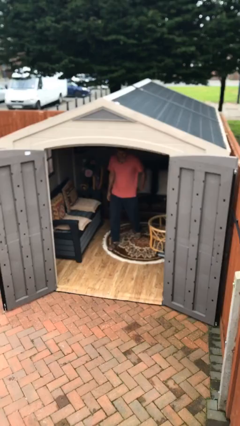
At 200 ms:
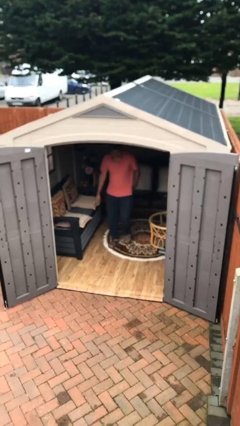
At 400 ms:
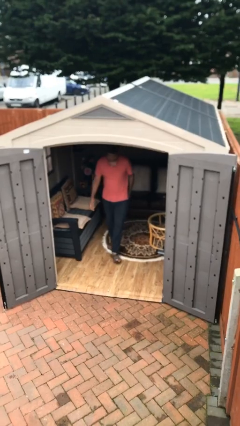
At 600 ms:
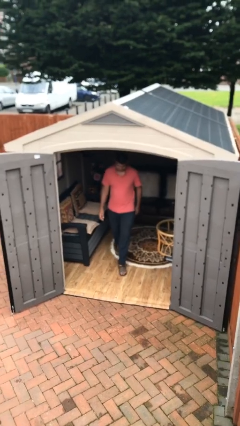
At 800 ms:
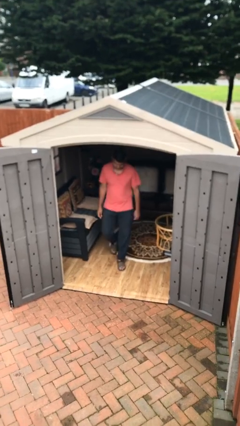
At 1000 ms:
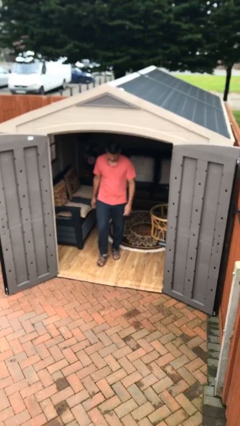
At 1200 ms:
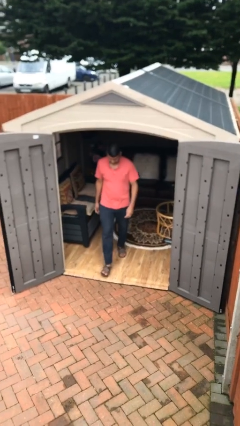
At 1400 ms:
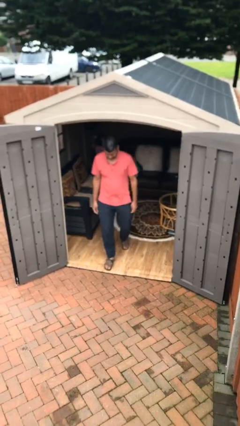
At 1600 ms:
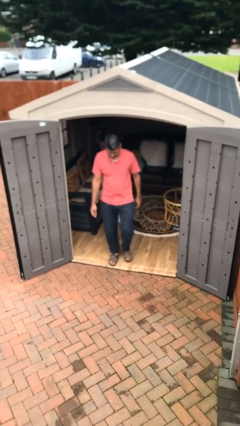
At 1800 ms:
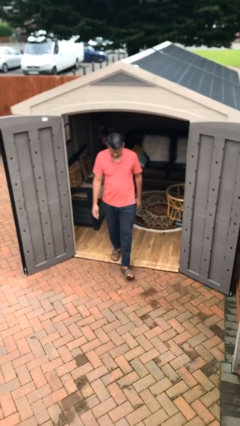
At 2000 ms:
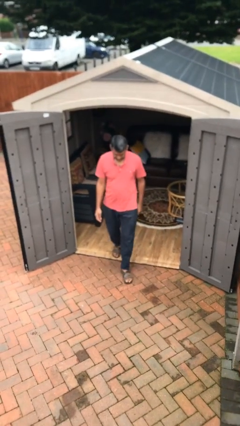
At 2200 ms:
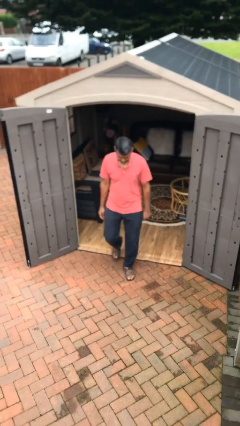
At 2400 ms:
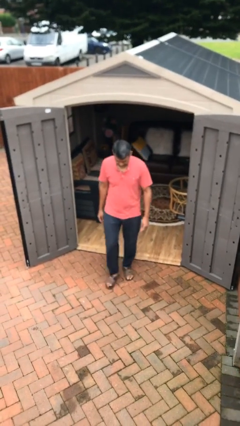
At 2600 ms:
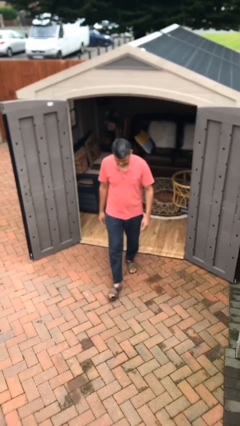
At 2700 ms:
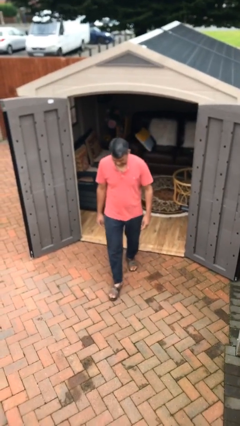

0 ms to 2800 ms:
person enters scene through structure

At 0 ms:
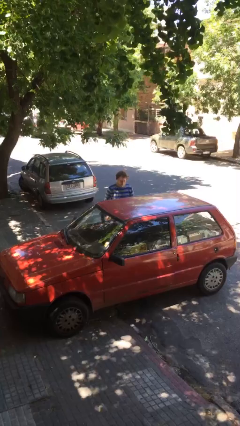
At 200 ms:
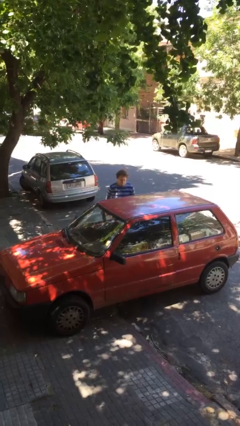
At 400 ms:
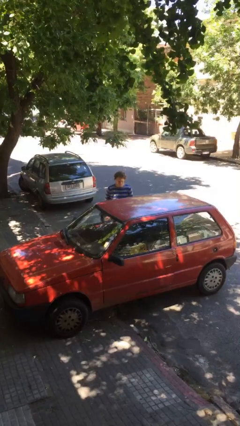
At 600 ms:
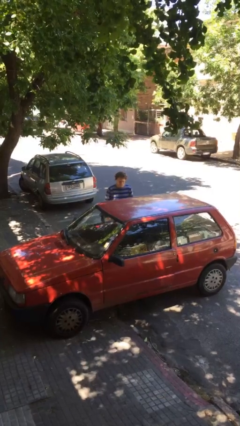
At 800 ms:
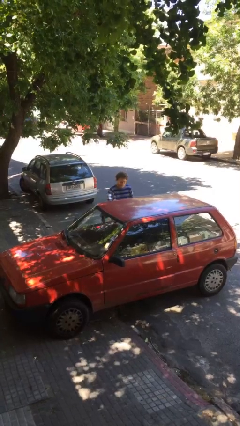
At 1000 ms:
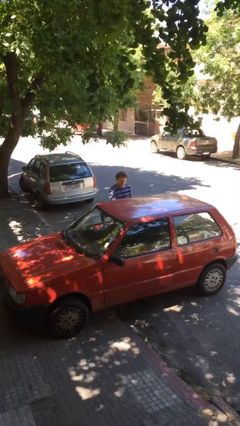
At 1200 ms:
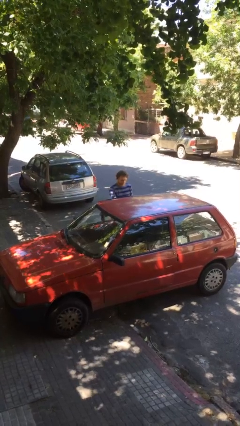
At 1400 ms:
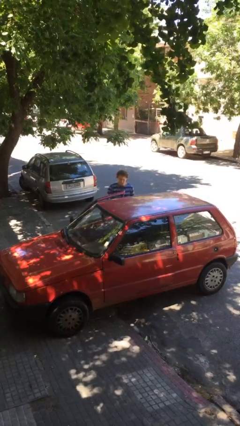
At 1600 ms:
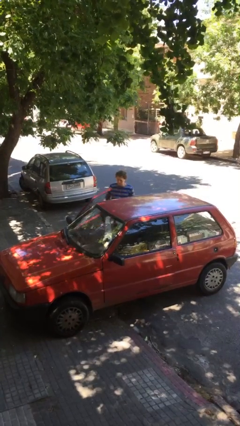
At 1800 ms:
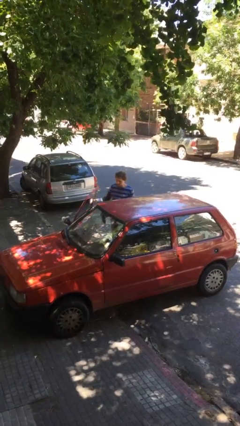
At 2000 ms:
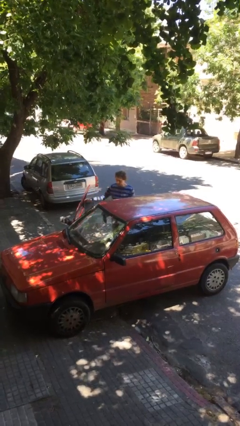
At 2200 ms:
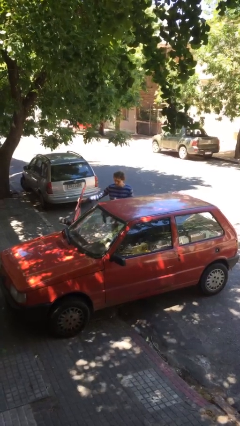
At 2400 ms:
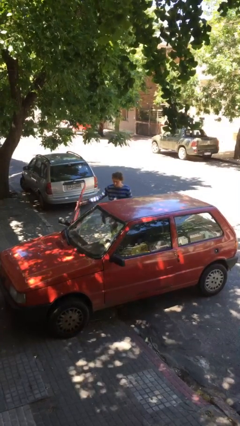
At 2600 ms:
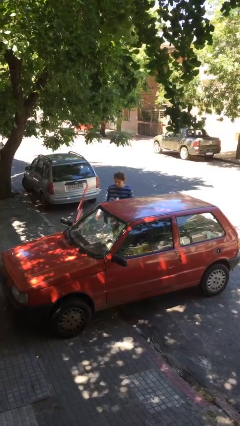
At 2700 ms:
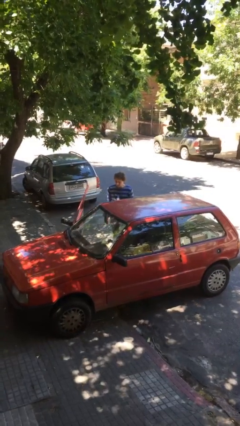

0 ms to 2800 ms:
person opens car door

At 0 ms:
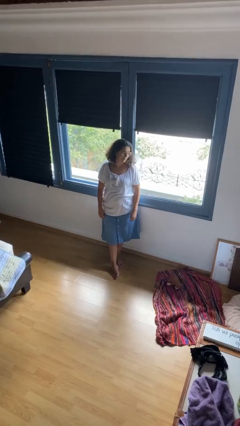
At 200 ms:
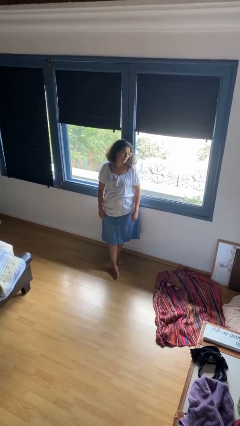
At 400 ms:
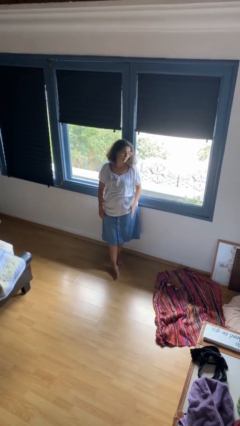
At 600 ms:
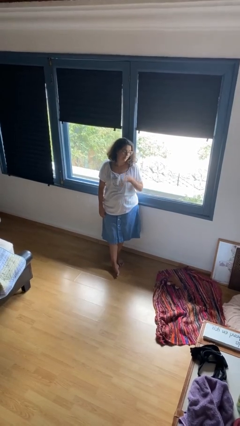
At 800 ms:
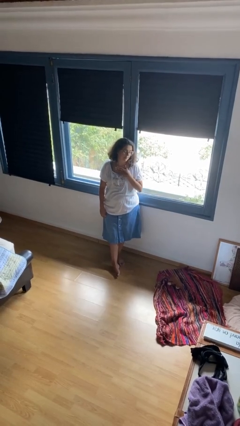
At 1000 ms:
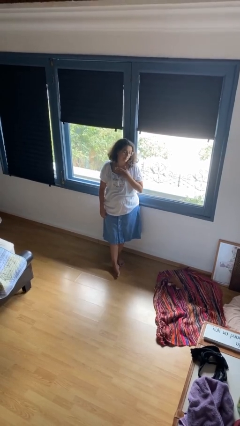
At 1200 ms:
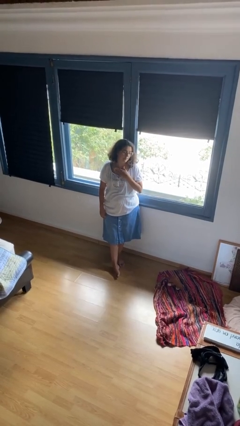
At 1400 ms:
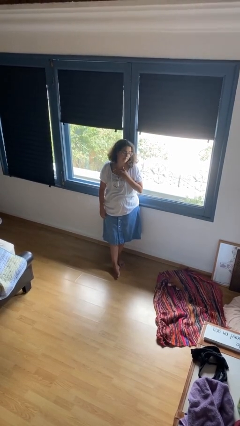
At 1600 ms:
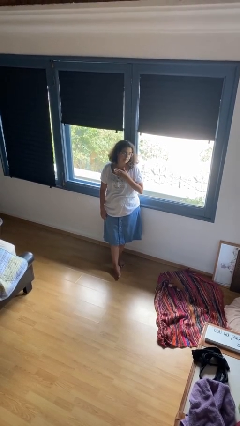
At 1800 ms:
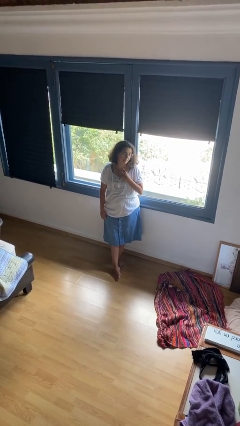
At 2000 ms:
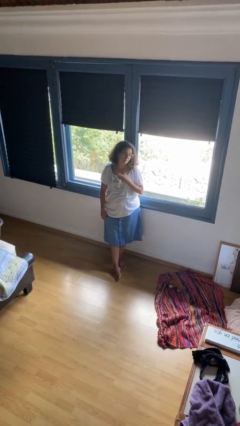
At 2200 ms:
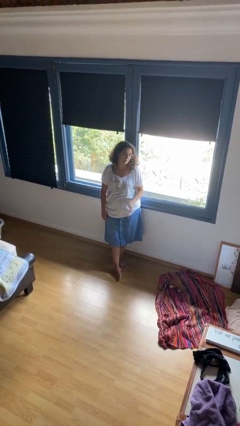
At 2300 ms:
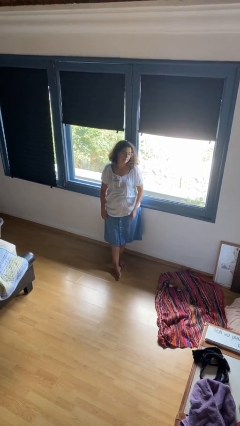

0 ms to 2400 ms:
person drums on chest

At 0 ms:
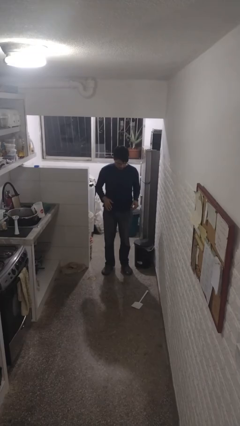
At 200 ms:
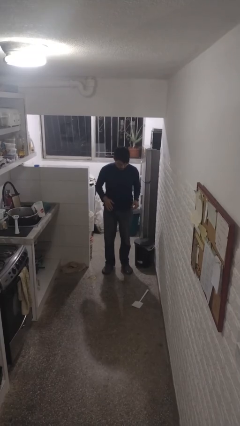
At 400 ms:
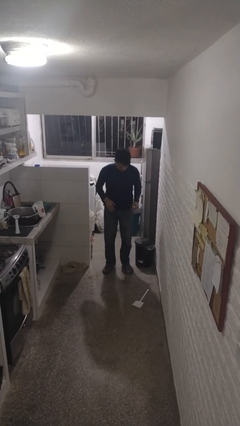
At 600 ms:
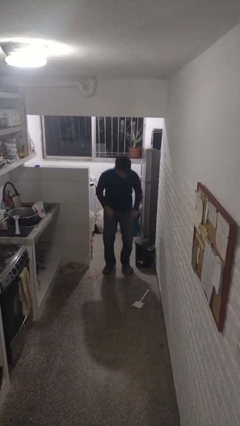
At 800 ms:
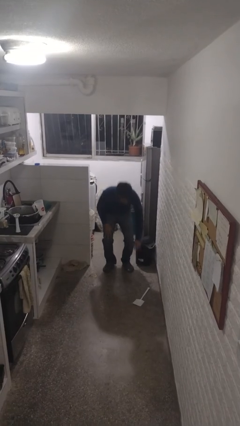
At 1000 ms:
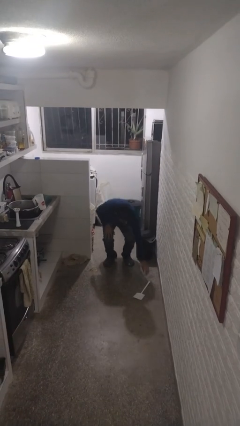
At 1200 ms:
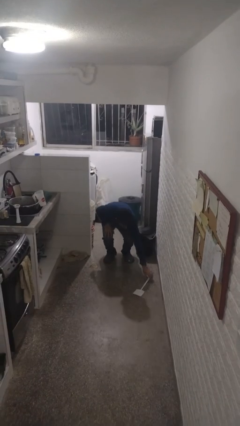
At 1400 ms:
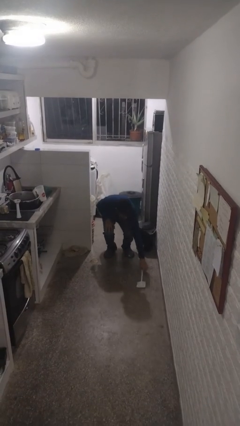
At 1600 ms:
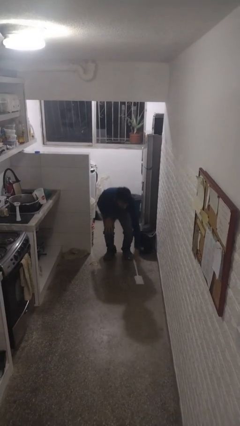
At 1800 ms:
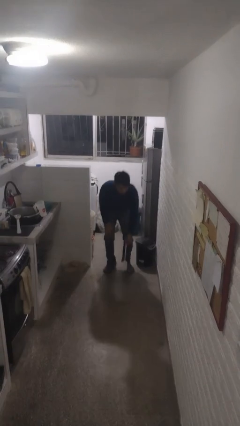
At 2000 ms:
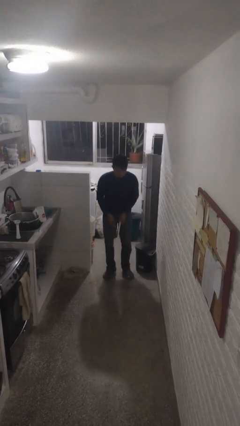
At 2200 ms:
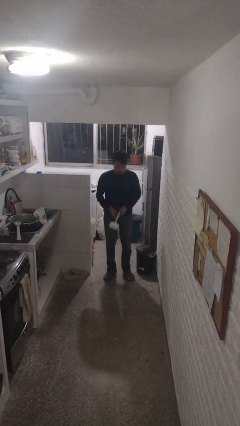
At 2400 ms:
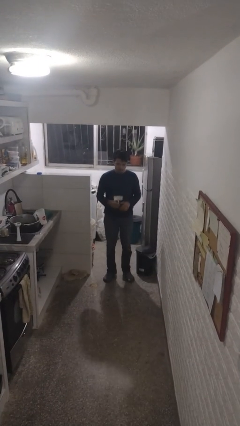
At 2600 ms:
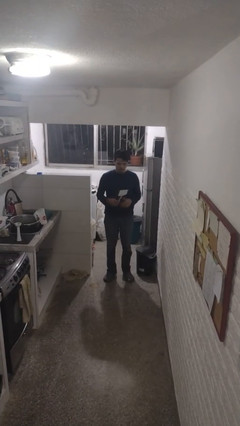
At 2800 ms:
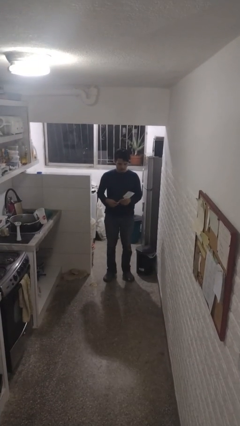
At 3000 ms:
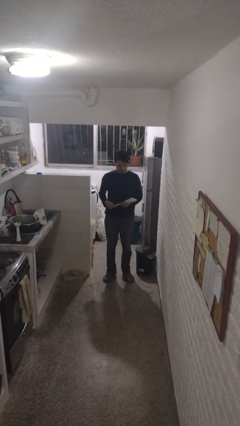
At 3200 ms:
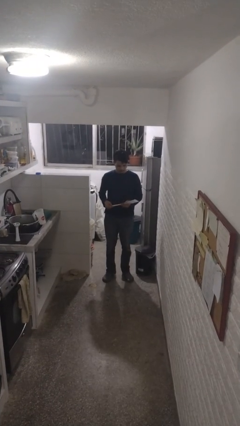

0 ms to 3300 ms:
person picks up object from floor

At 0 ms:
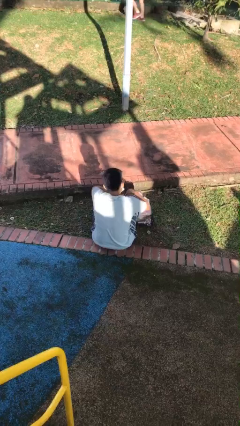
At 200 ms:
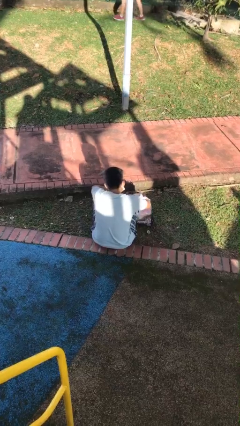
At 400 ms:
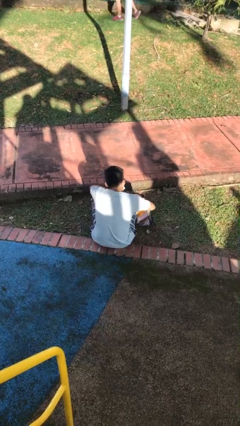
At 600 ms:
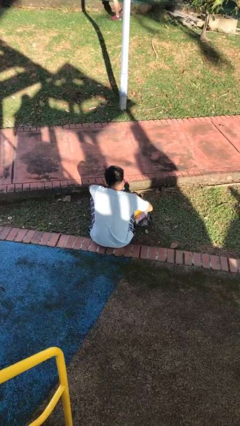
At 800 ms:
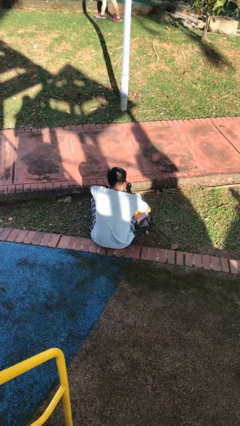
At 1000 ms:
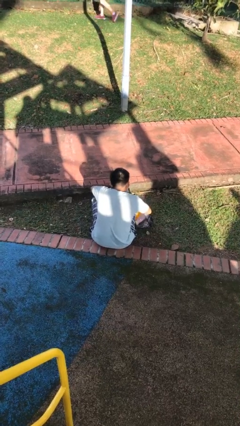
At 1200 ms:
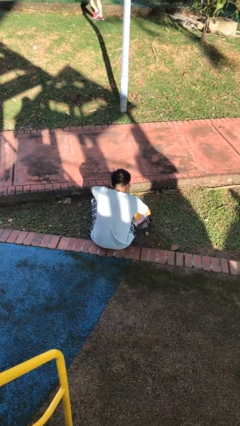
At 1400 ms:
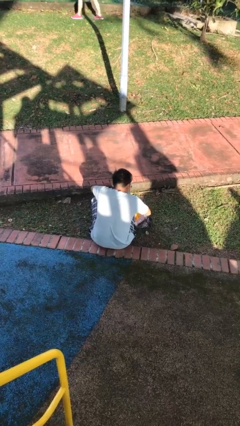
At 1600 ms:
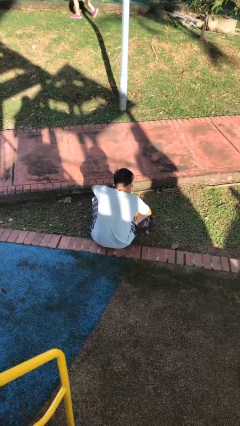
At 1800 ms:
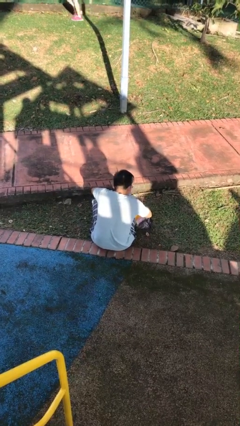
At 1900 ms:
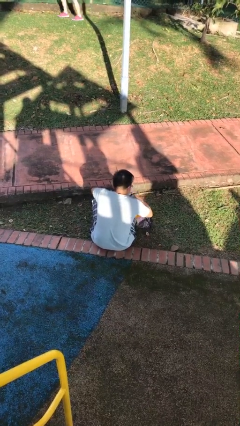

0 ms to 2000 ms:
person searches in bag

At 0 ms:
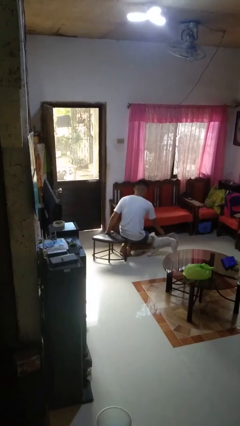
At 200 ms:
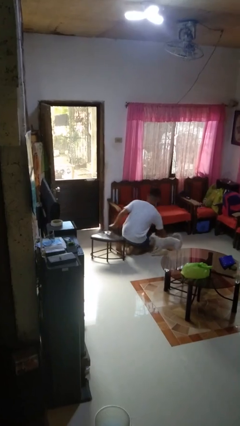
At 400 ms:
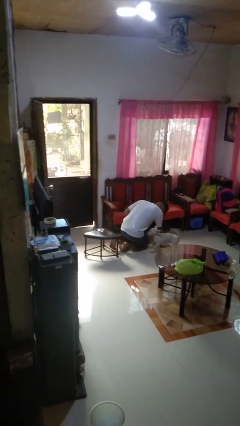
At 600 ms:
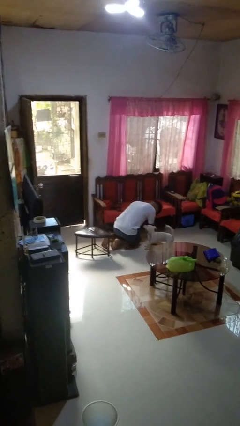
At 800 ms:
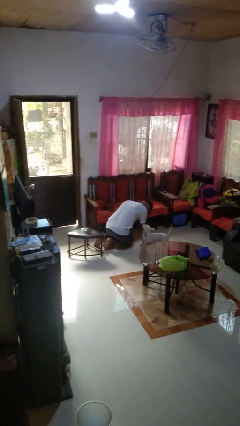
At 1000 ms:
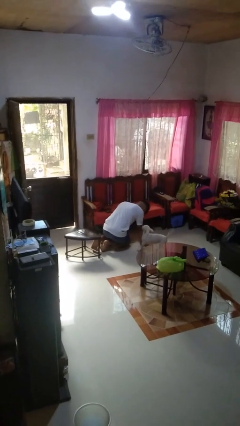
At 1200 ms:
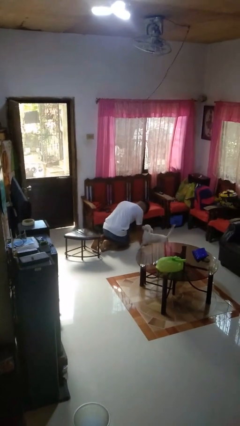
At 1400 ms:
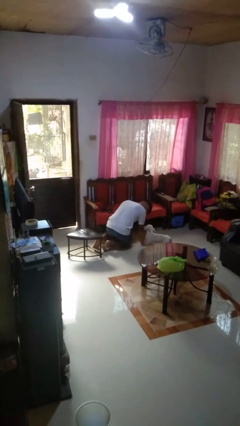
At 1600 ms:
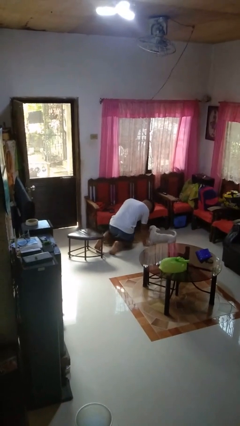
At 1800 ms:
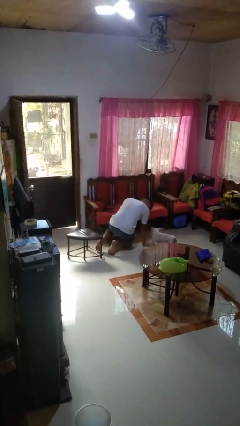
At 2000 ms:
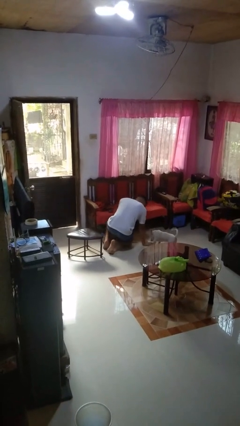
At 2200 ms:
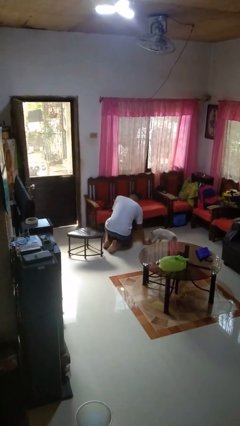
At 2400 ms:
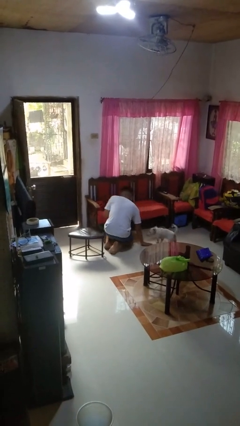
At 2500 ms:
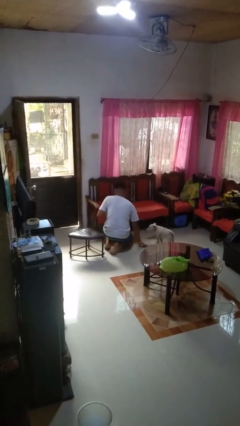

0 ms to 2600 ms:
person falls from chair

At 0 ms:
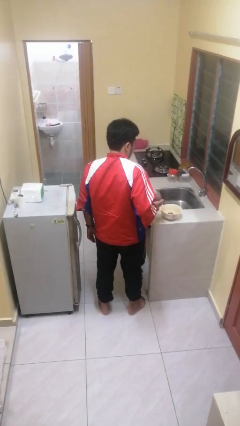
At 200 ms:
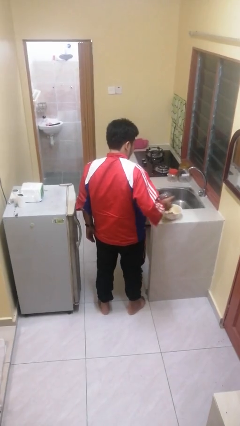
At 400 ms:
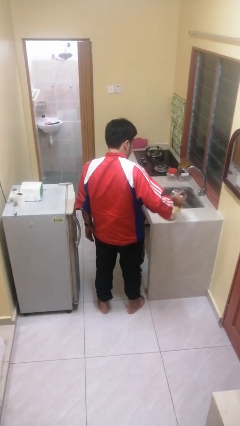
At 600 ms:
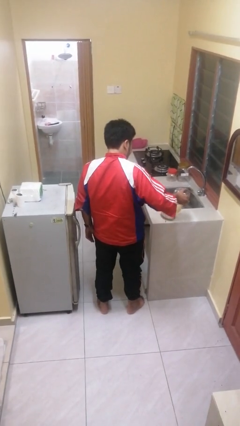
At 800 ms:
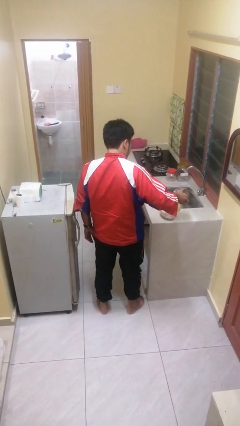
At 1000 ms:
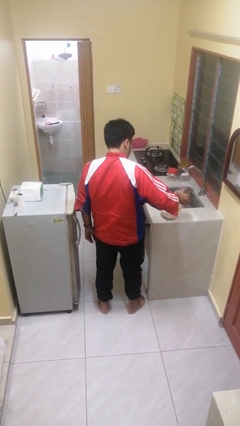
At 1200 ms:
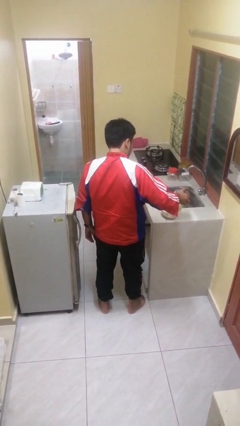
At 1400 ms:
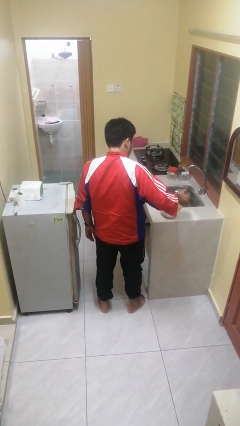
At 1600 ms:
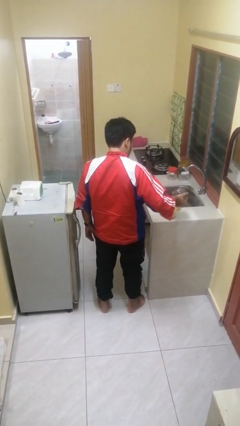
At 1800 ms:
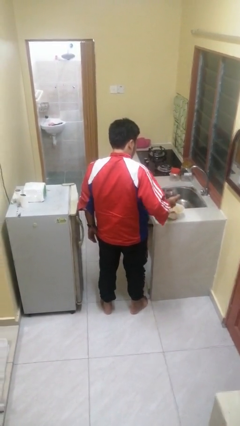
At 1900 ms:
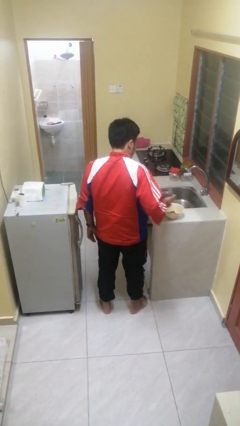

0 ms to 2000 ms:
person pours into bowl
